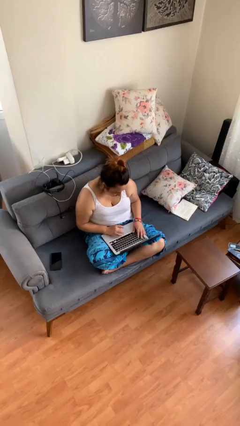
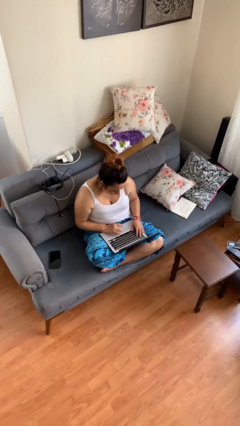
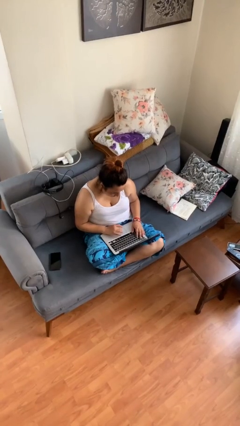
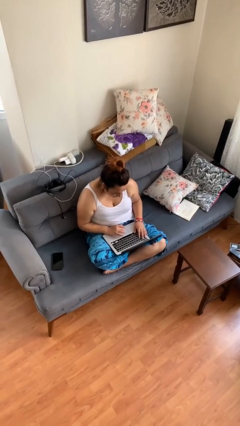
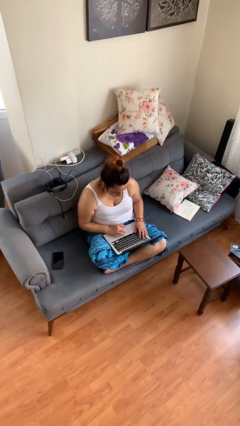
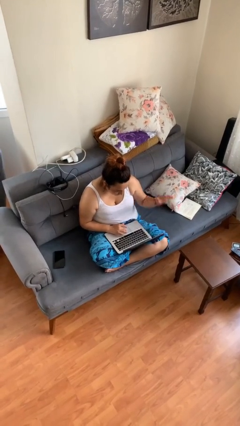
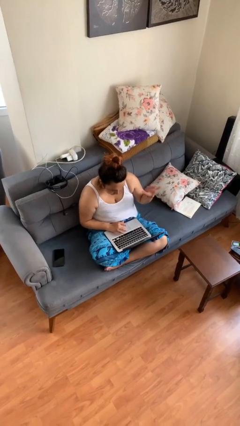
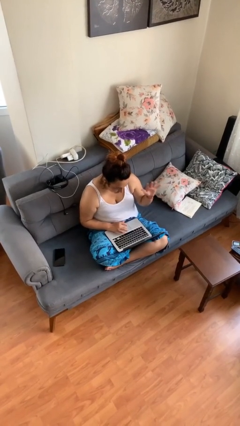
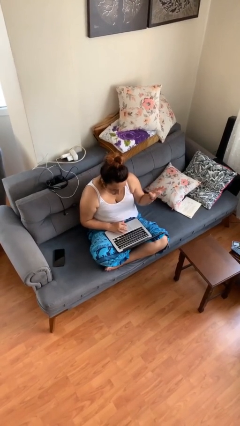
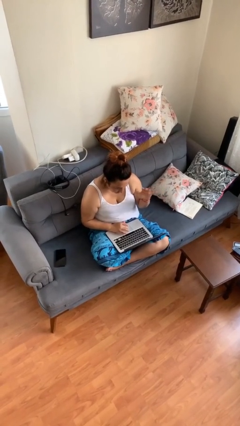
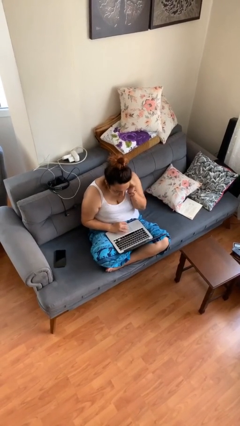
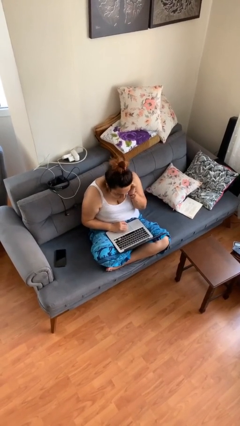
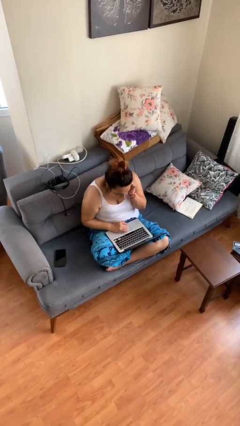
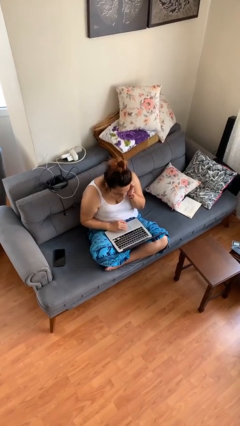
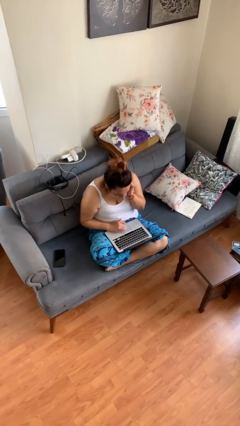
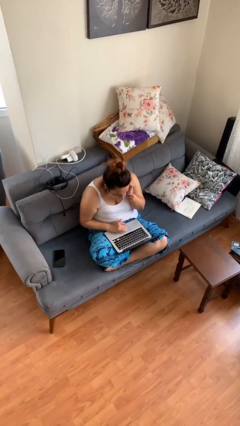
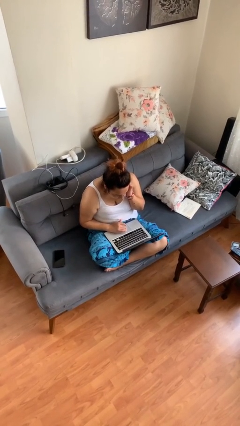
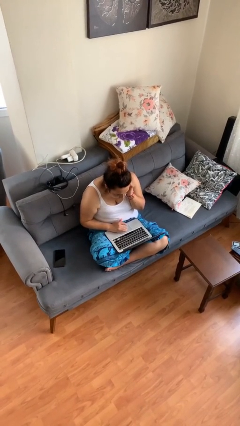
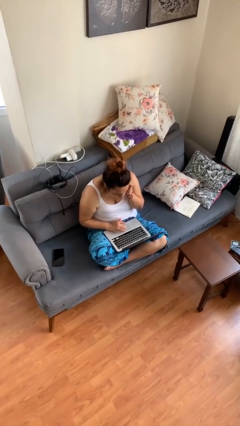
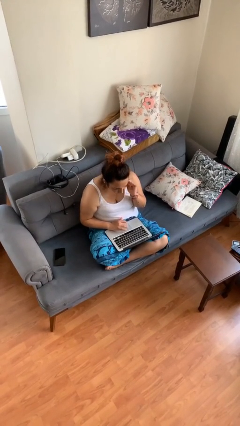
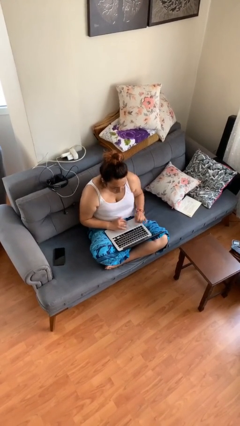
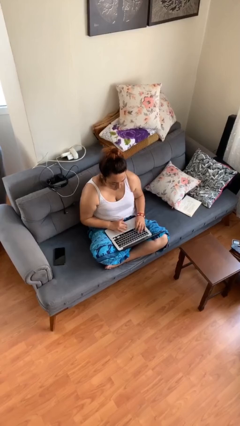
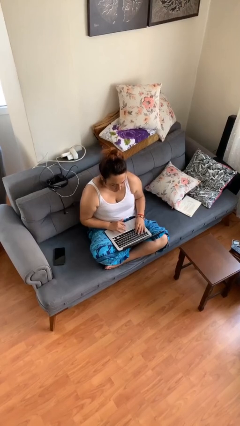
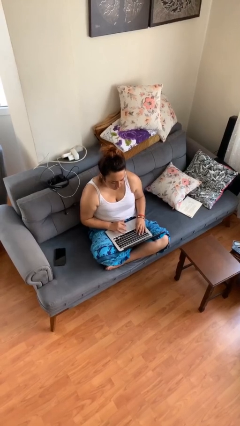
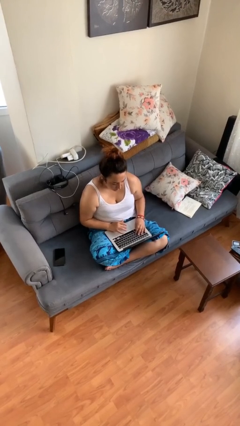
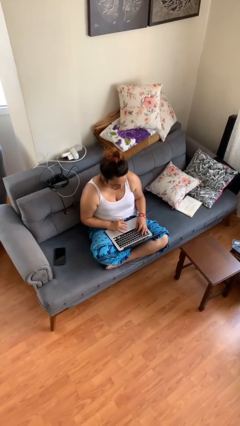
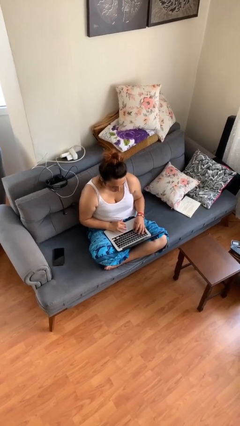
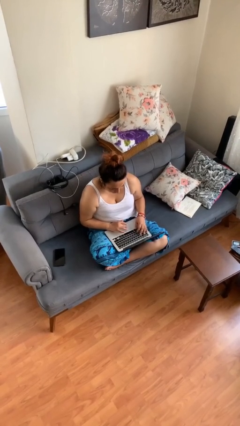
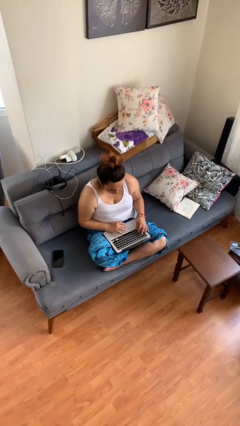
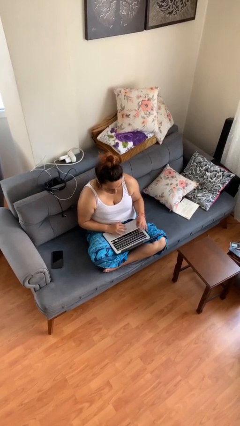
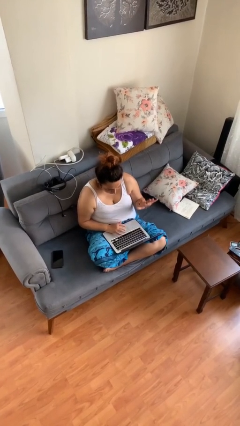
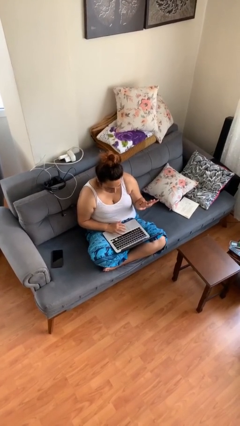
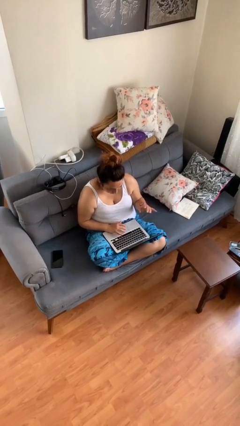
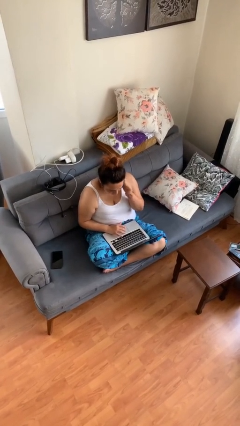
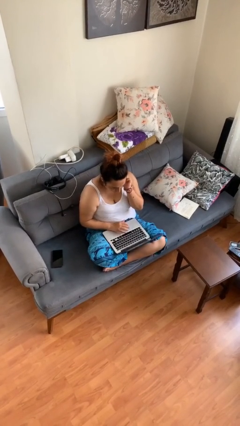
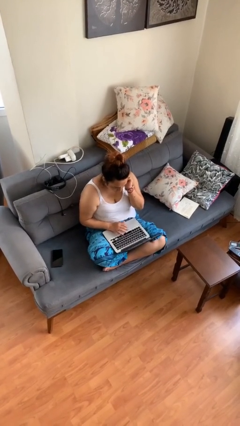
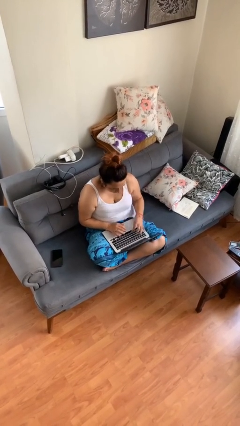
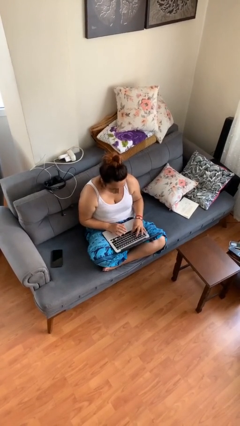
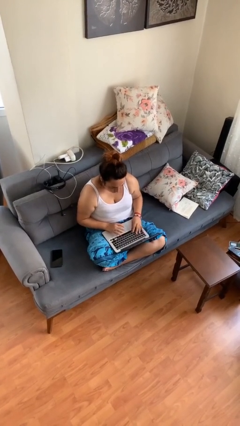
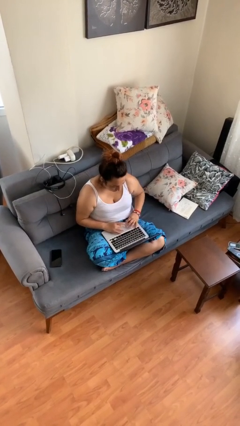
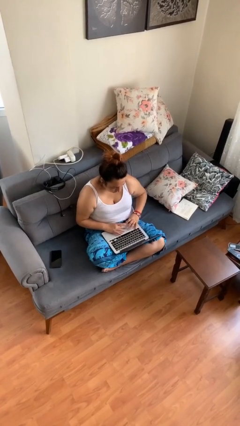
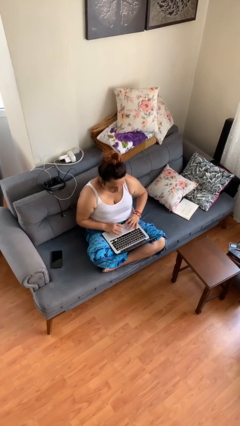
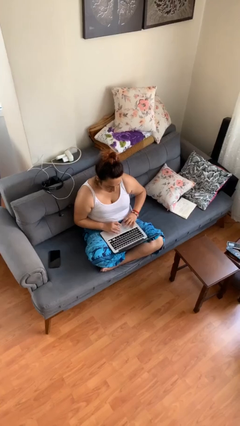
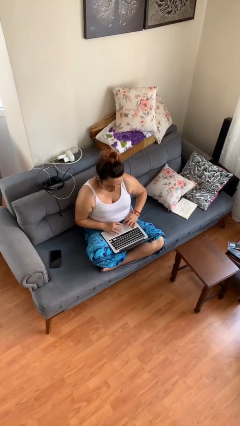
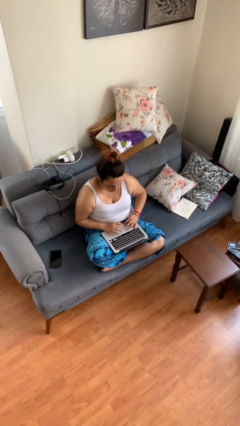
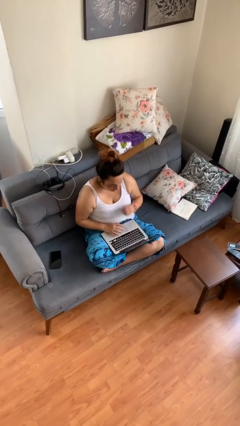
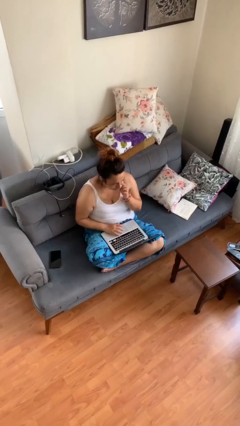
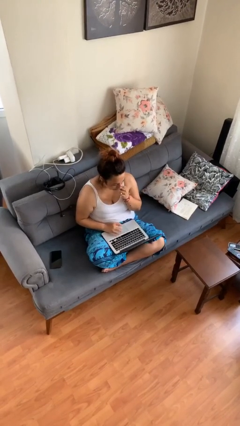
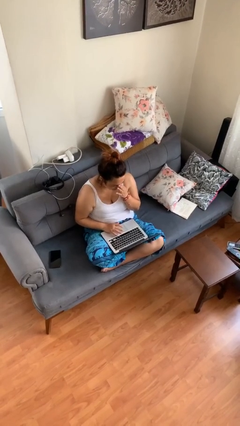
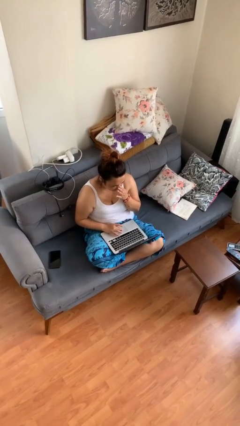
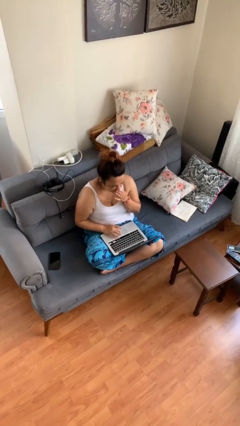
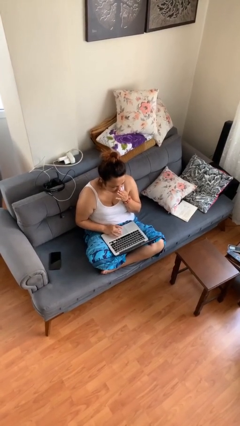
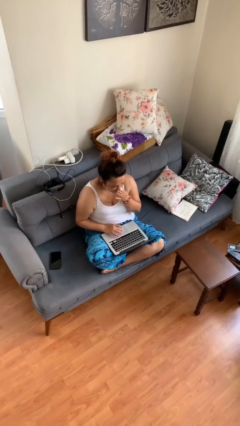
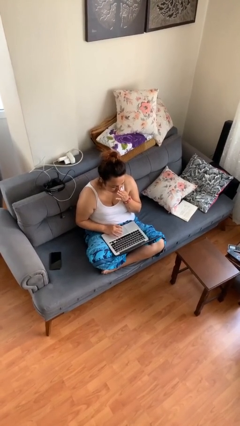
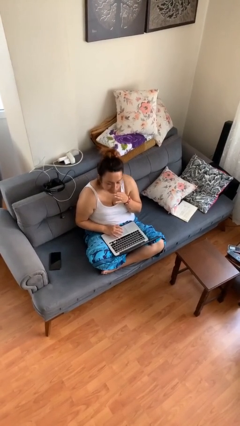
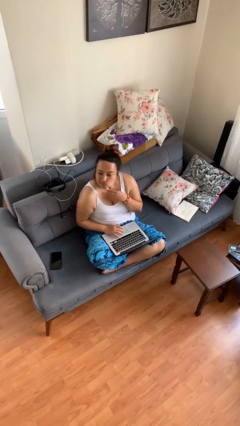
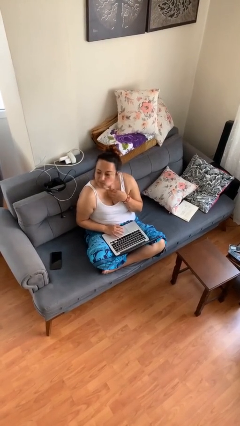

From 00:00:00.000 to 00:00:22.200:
person interacts with laptop

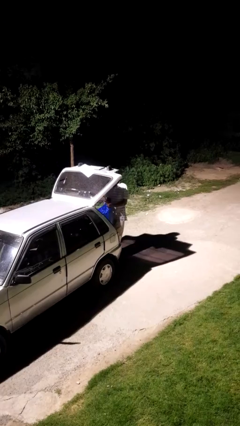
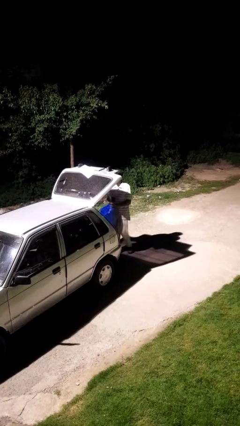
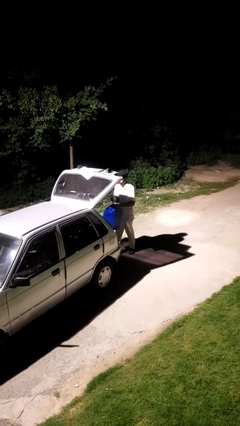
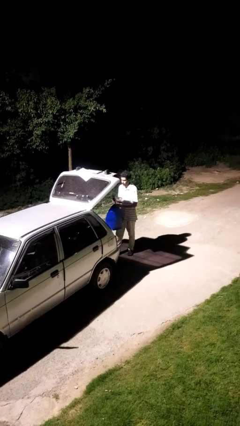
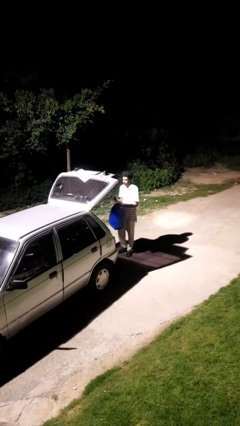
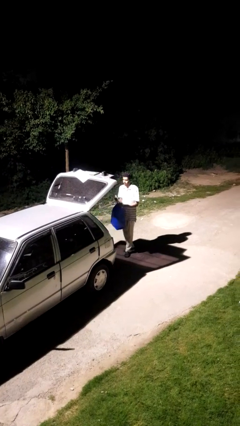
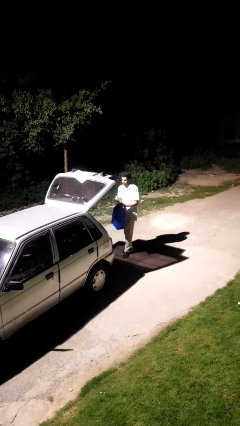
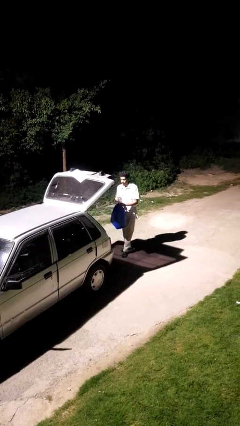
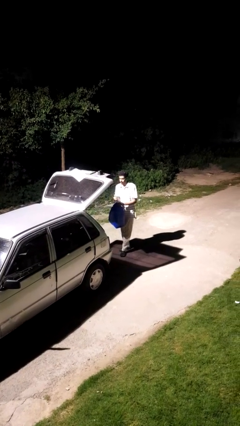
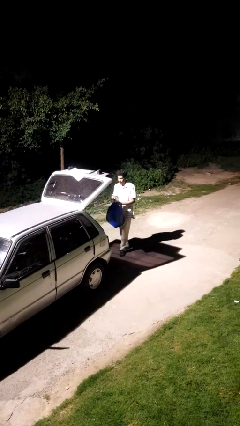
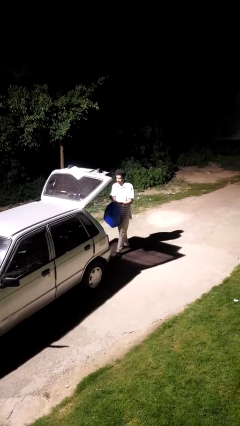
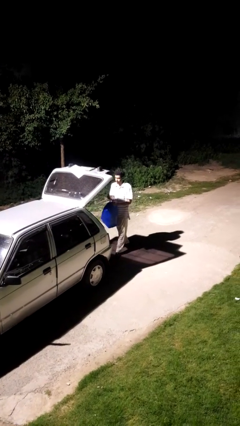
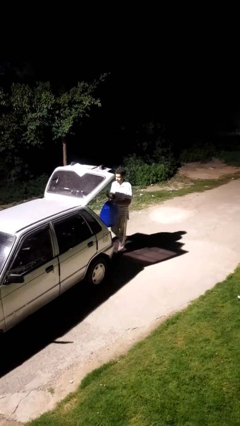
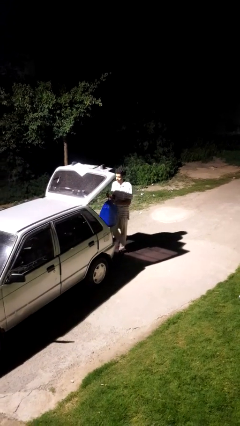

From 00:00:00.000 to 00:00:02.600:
person unloads car

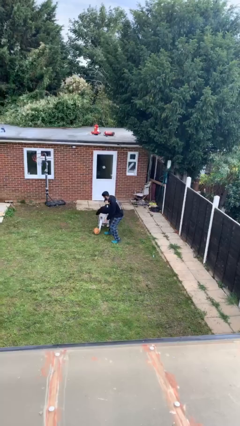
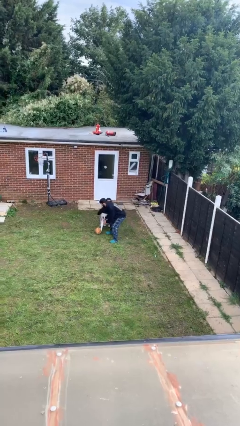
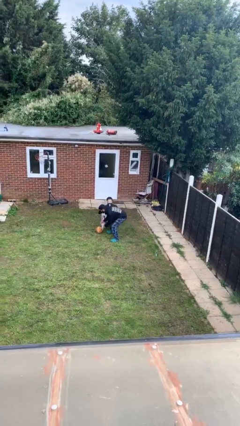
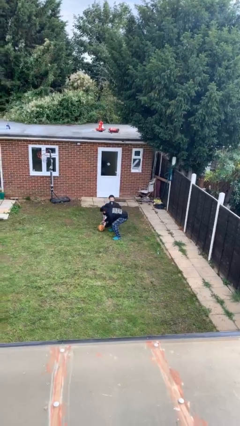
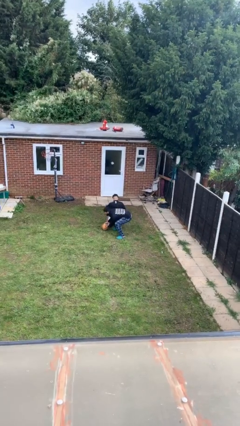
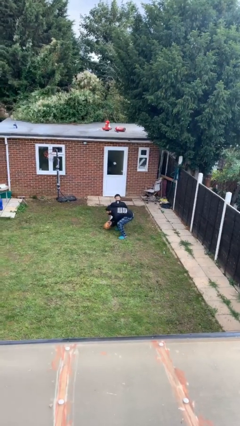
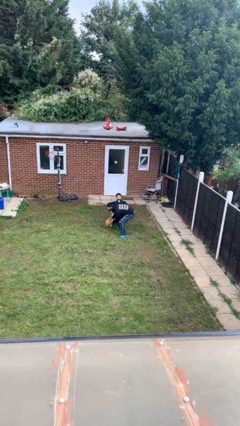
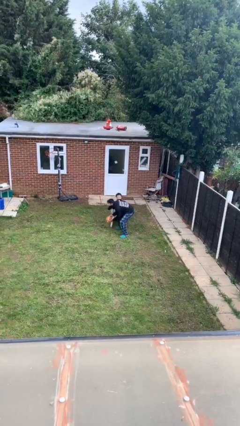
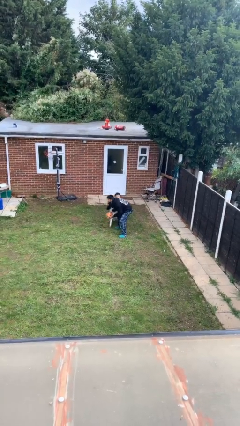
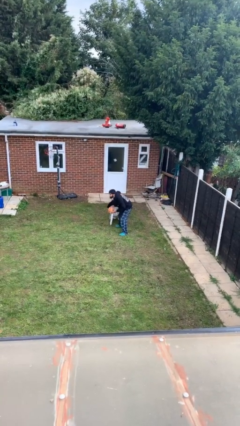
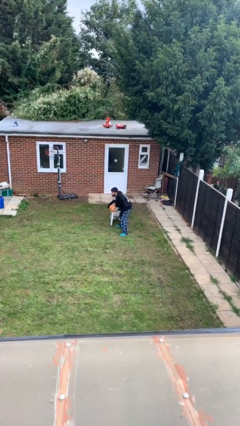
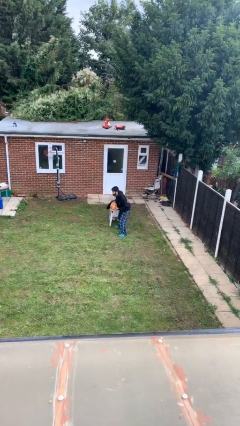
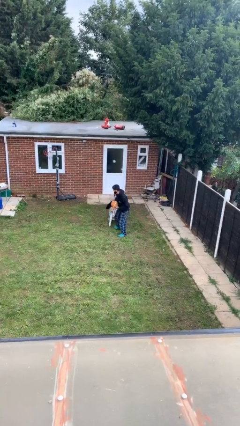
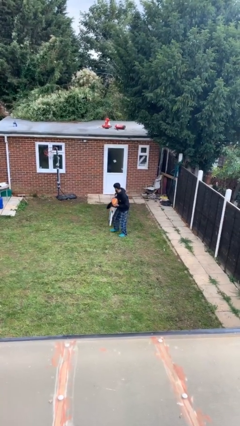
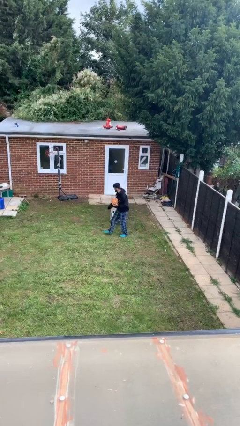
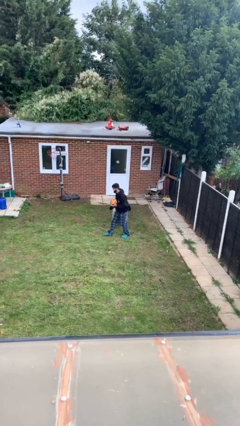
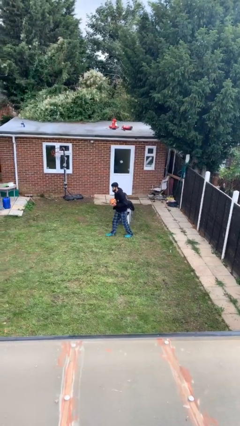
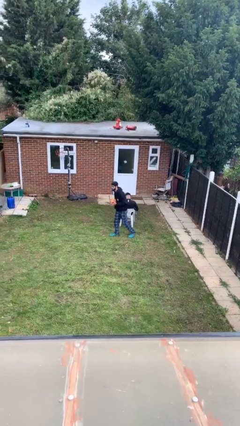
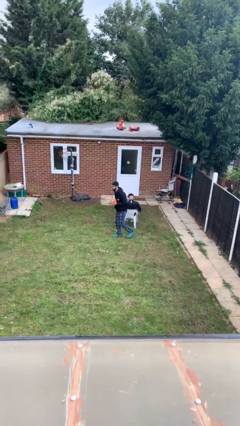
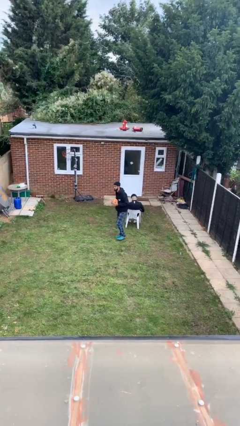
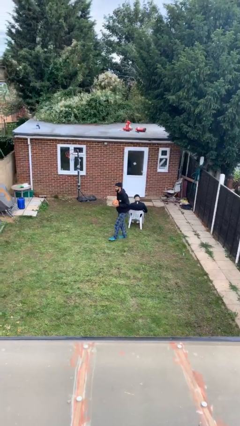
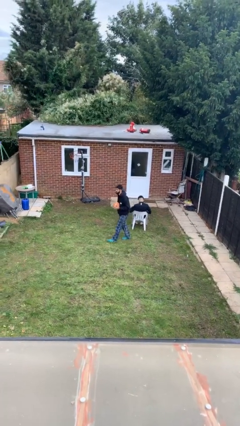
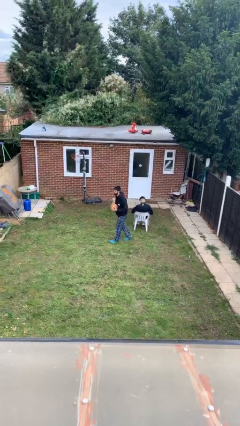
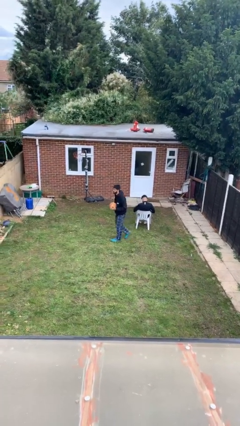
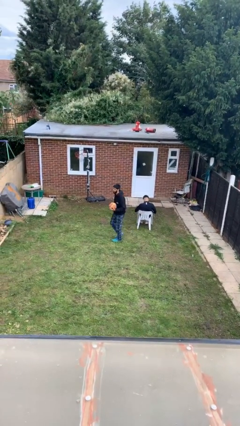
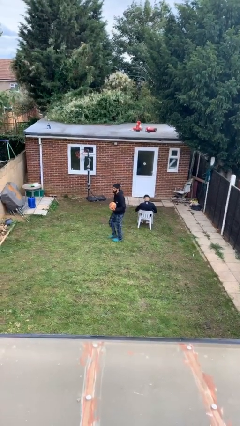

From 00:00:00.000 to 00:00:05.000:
person steals object from person
